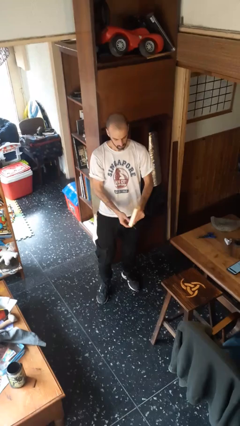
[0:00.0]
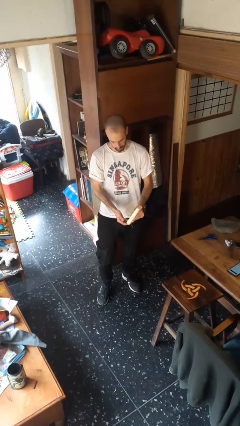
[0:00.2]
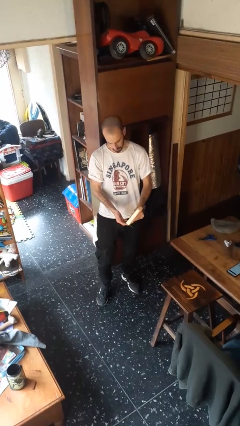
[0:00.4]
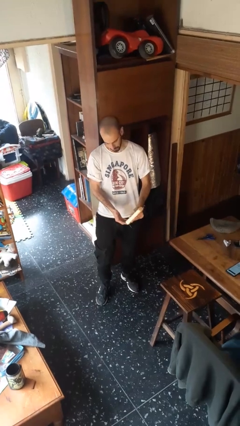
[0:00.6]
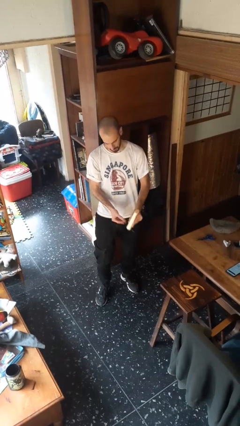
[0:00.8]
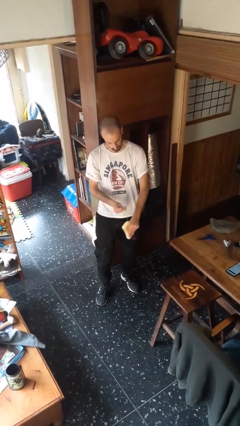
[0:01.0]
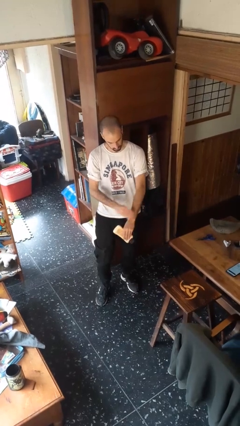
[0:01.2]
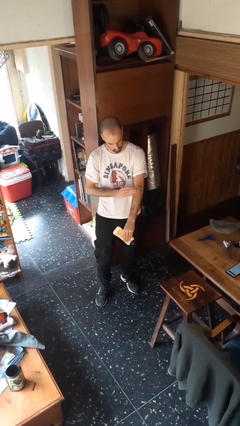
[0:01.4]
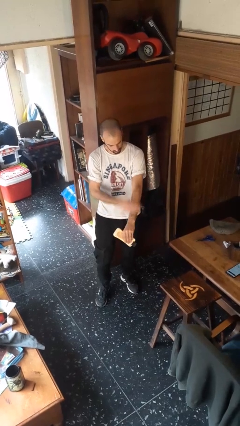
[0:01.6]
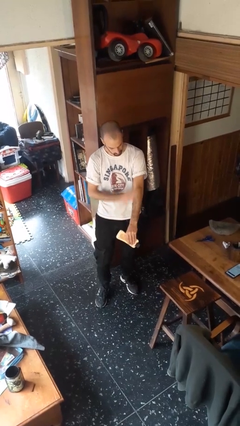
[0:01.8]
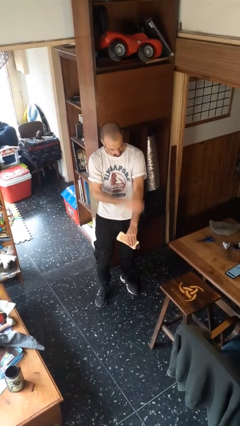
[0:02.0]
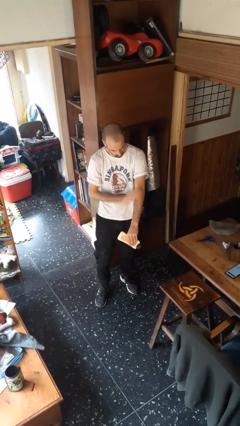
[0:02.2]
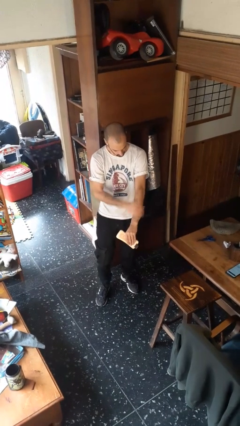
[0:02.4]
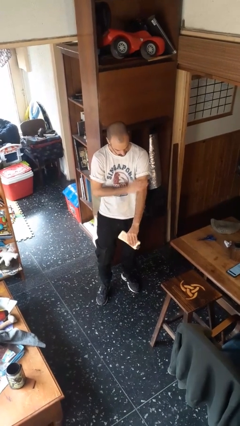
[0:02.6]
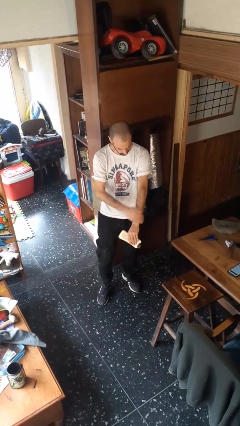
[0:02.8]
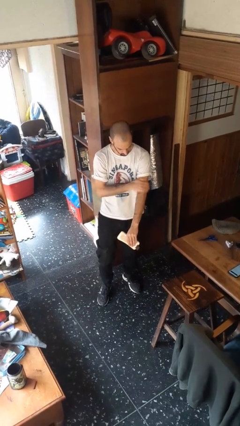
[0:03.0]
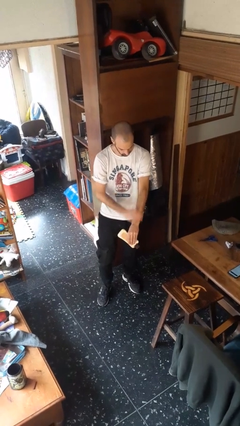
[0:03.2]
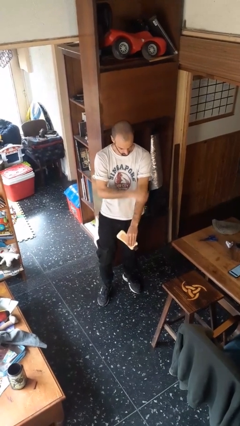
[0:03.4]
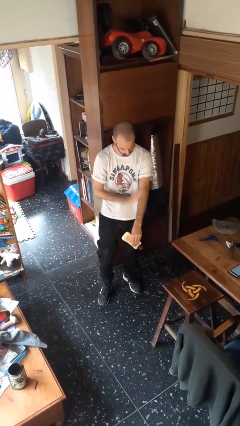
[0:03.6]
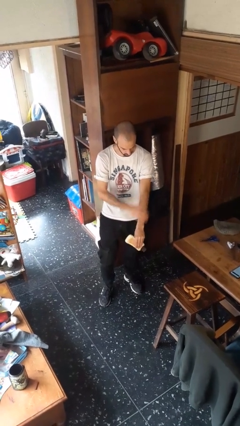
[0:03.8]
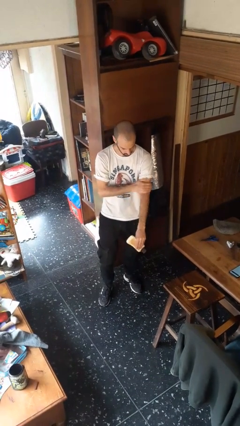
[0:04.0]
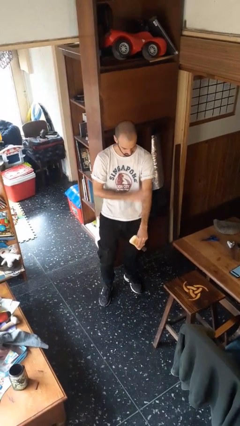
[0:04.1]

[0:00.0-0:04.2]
person applies sunscreen

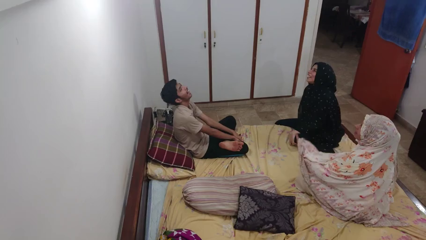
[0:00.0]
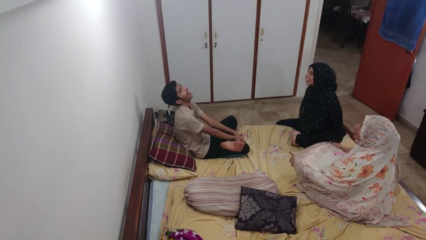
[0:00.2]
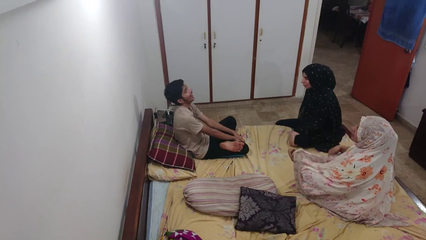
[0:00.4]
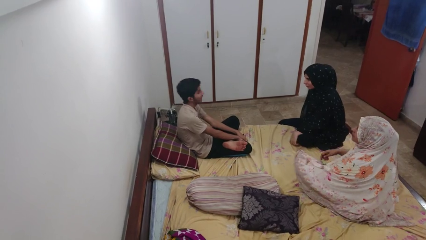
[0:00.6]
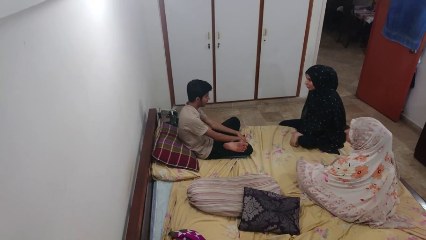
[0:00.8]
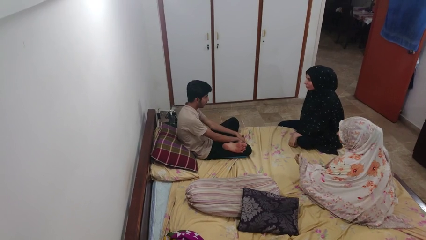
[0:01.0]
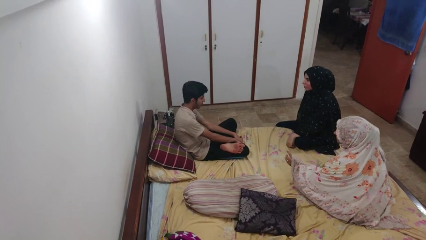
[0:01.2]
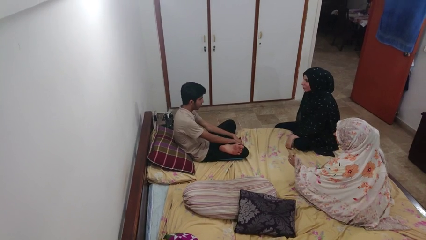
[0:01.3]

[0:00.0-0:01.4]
person laughs with person

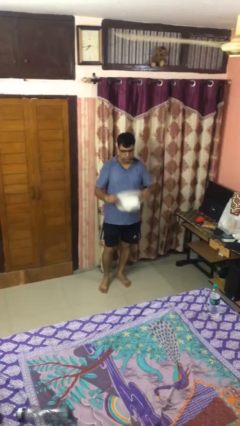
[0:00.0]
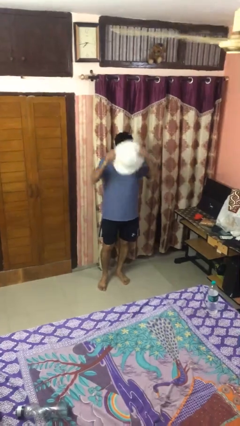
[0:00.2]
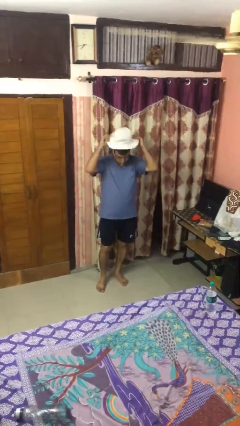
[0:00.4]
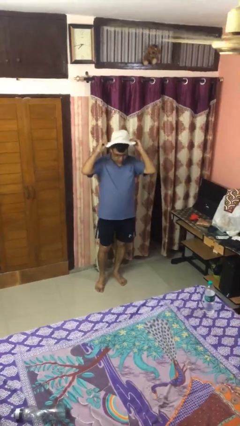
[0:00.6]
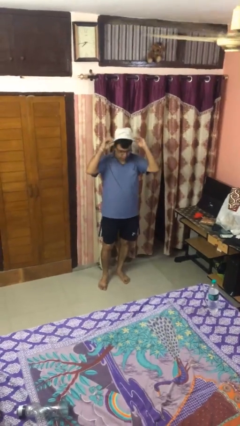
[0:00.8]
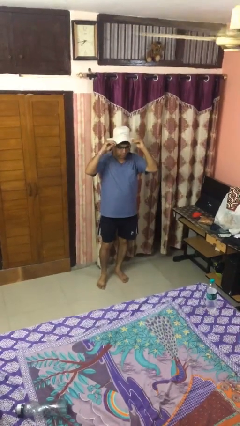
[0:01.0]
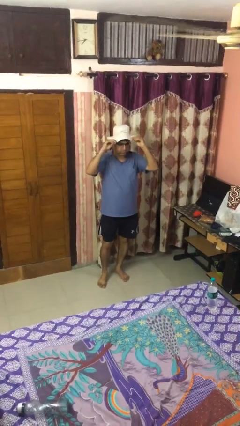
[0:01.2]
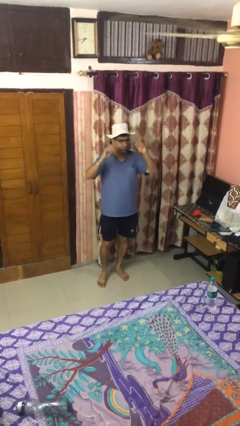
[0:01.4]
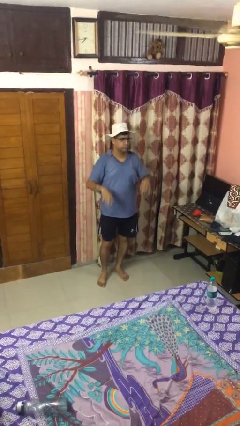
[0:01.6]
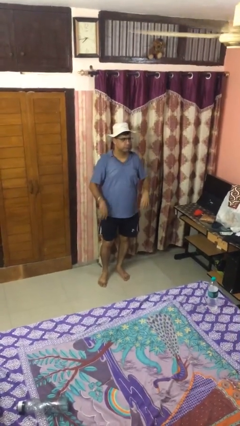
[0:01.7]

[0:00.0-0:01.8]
person puts on hat

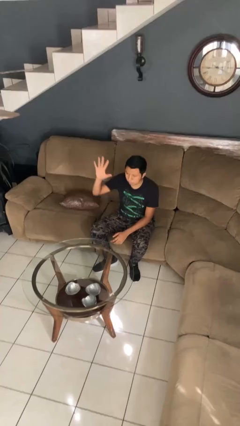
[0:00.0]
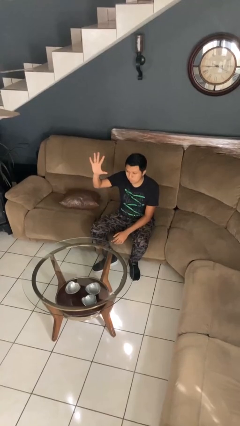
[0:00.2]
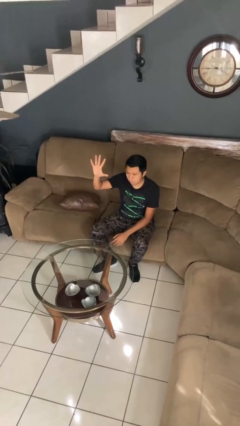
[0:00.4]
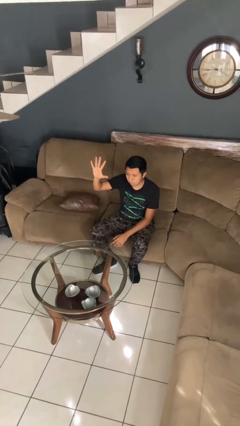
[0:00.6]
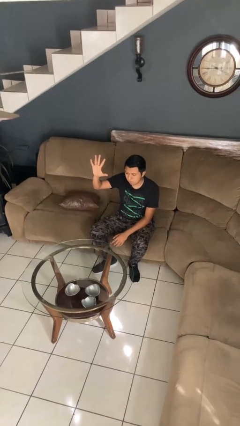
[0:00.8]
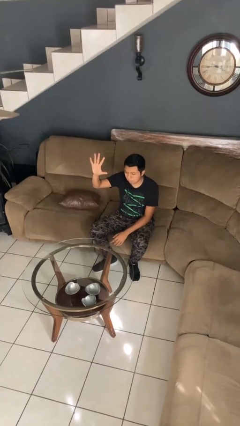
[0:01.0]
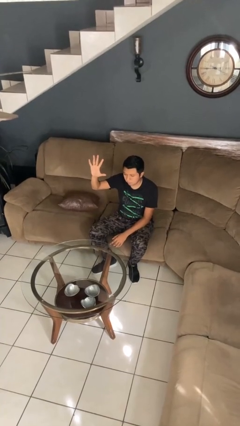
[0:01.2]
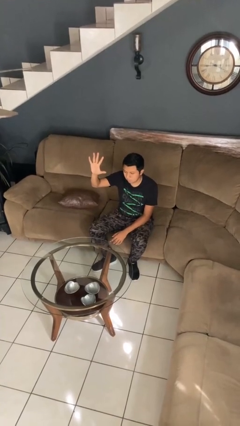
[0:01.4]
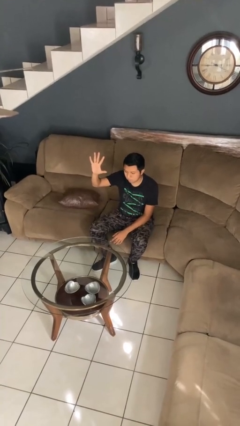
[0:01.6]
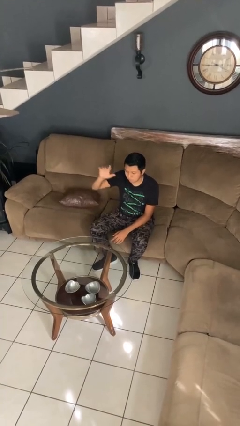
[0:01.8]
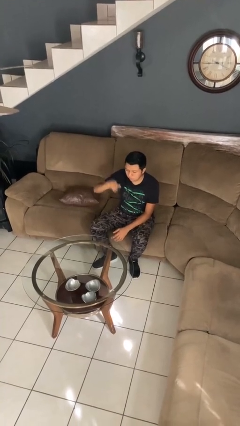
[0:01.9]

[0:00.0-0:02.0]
person gestures number five

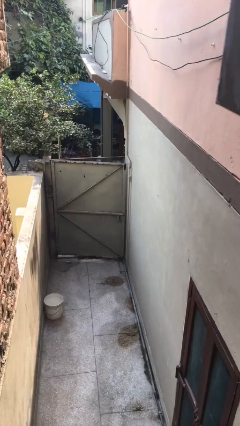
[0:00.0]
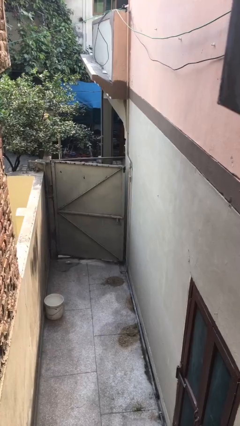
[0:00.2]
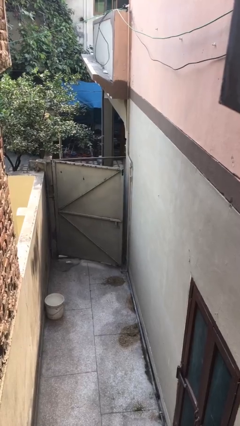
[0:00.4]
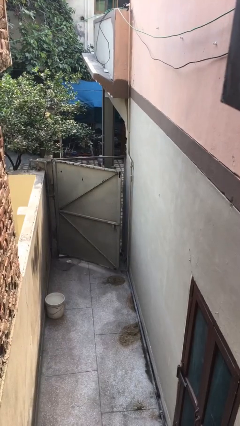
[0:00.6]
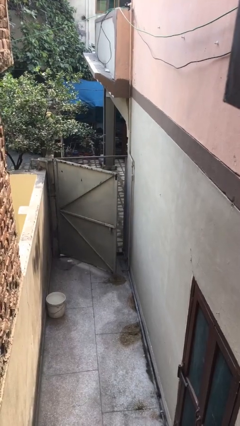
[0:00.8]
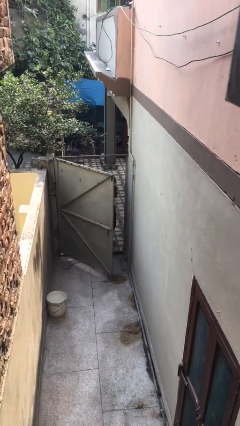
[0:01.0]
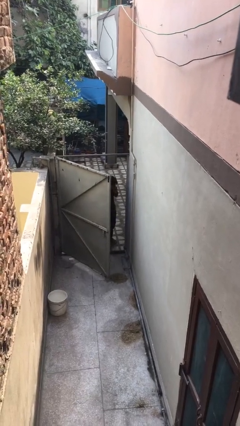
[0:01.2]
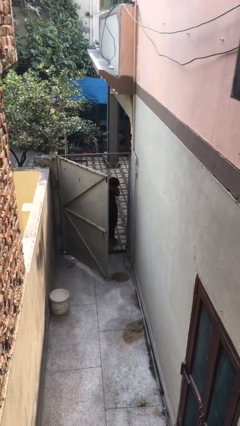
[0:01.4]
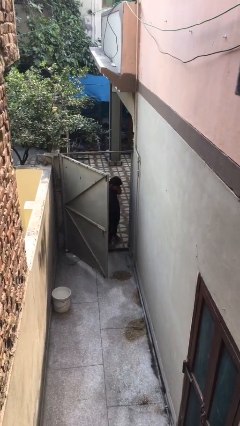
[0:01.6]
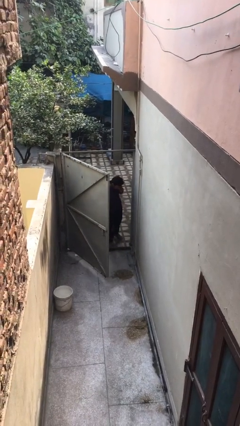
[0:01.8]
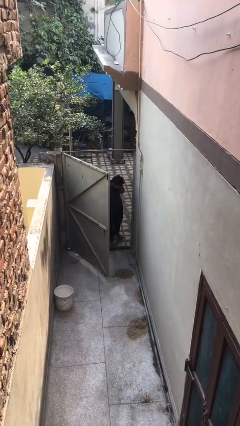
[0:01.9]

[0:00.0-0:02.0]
person opens facility door

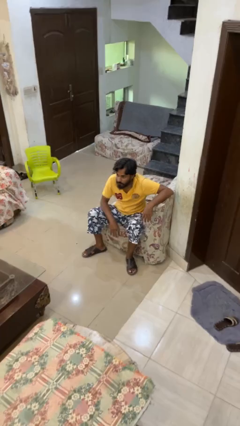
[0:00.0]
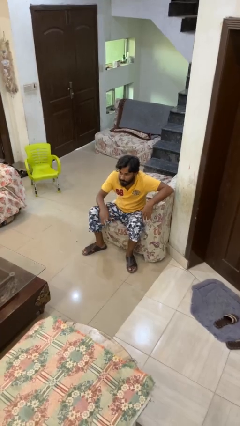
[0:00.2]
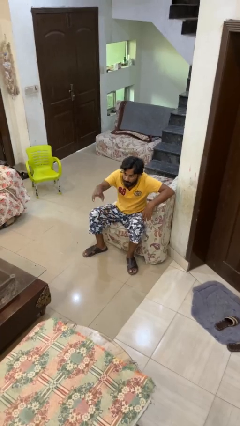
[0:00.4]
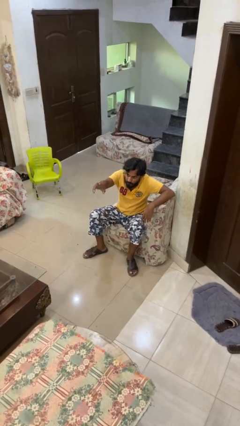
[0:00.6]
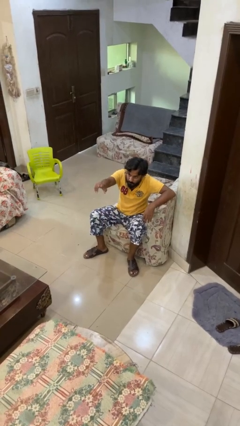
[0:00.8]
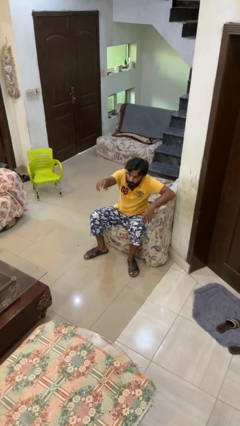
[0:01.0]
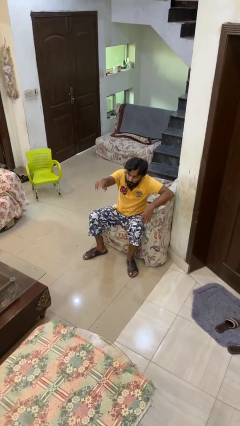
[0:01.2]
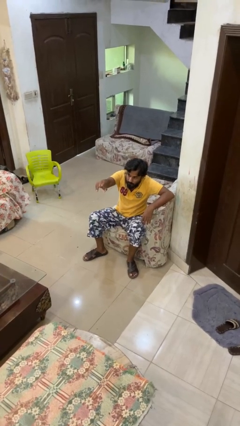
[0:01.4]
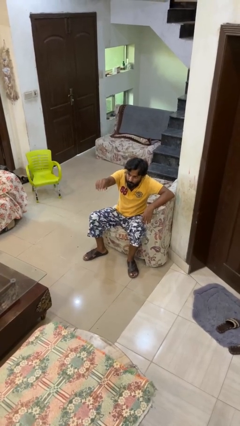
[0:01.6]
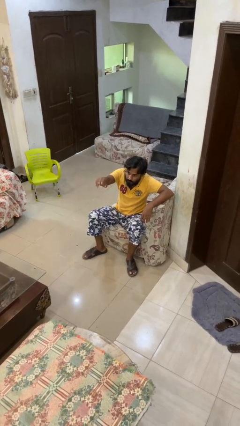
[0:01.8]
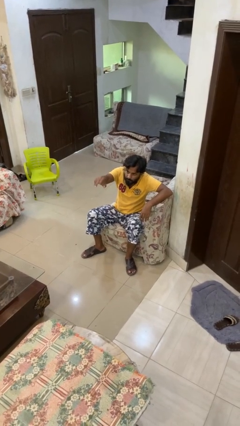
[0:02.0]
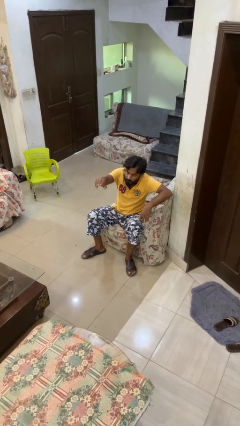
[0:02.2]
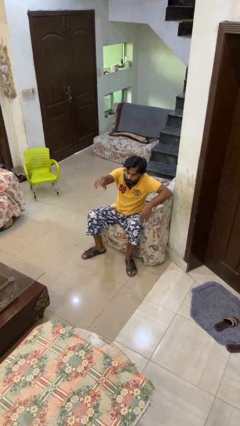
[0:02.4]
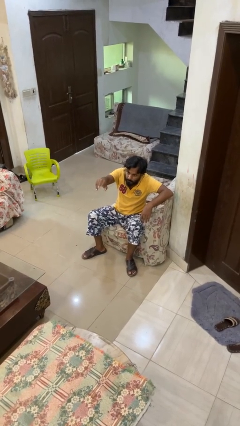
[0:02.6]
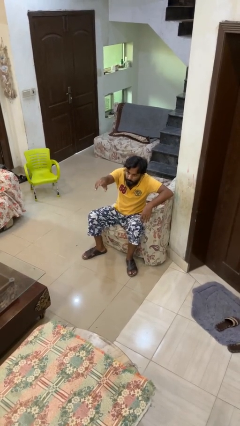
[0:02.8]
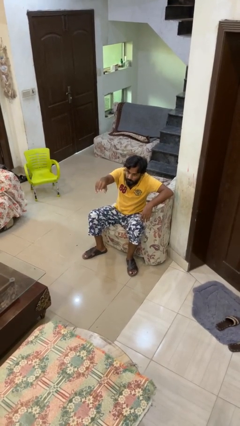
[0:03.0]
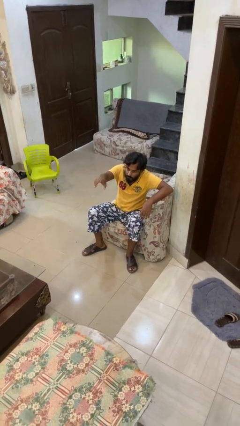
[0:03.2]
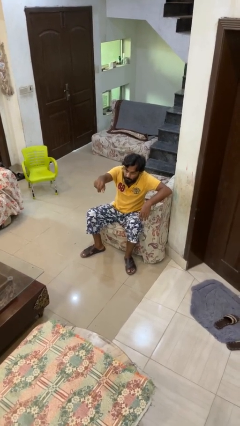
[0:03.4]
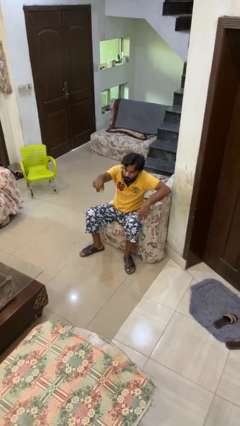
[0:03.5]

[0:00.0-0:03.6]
person gestures come here

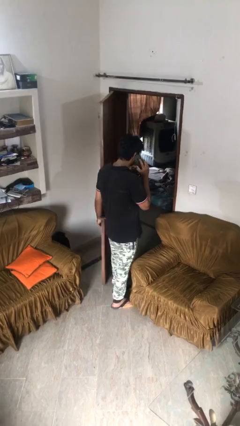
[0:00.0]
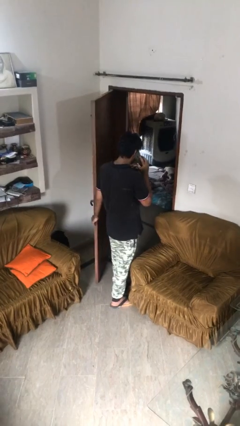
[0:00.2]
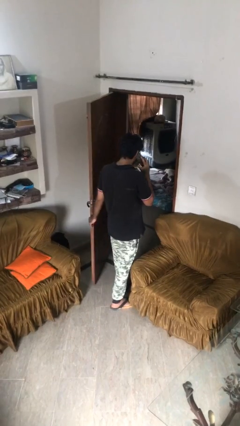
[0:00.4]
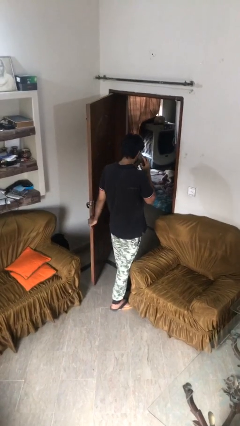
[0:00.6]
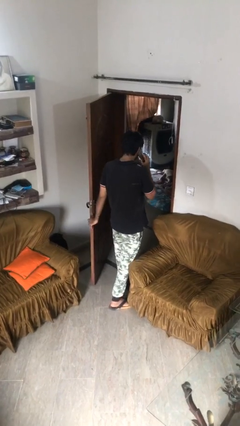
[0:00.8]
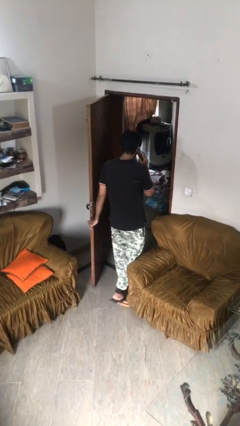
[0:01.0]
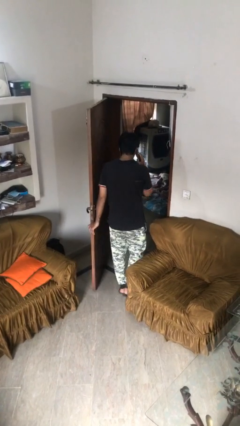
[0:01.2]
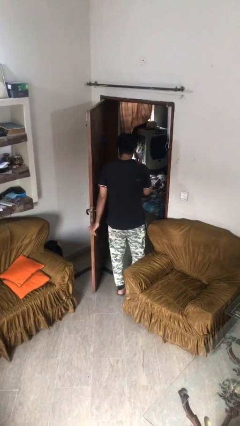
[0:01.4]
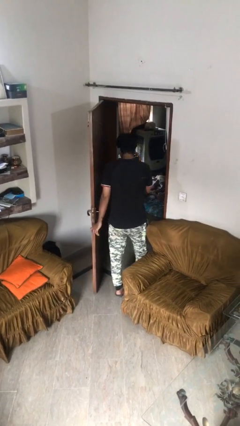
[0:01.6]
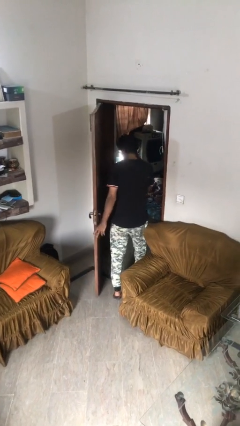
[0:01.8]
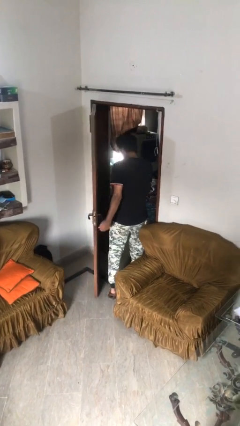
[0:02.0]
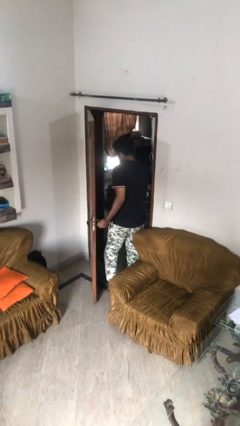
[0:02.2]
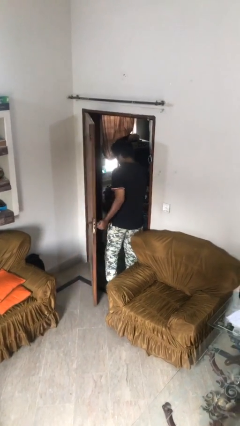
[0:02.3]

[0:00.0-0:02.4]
person exits scene through structure
